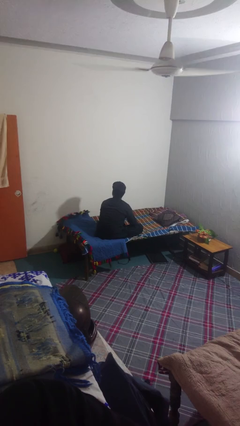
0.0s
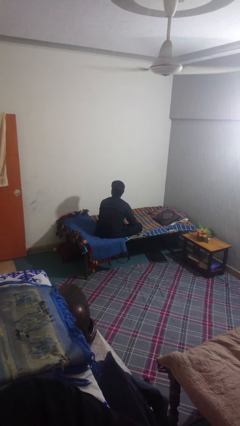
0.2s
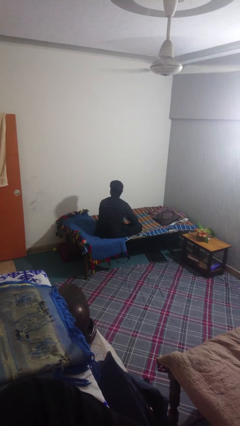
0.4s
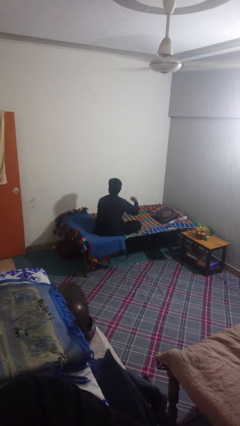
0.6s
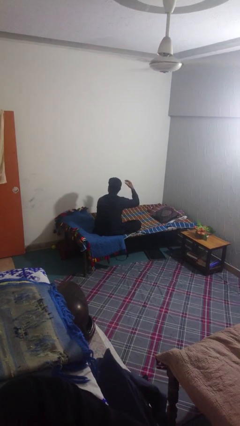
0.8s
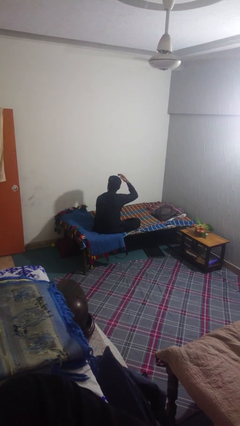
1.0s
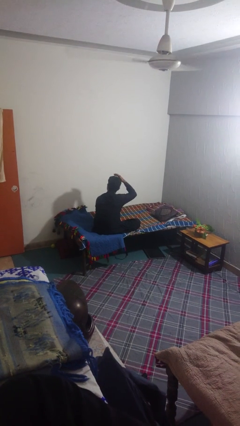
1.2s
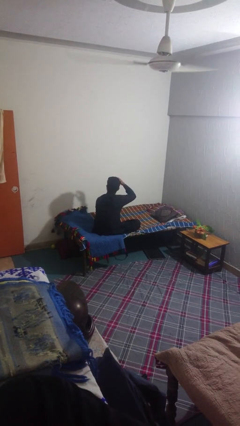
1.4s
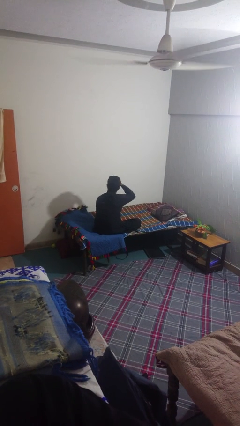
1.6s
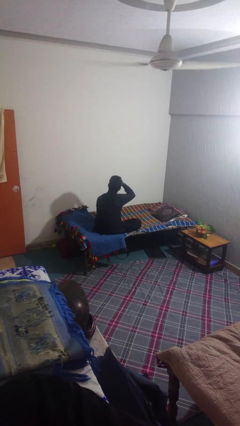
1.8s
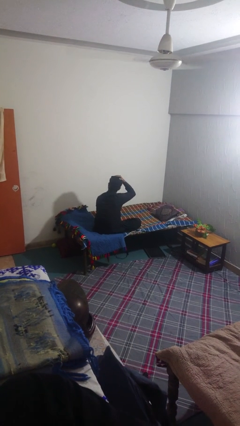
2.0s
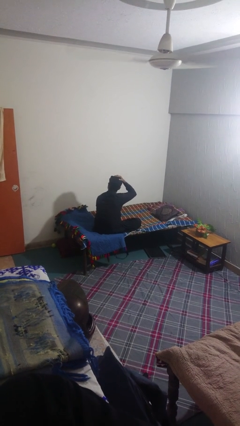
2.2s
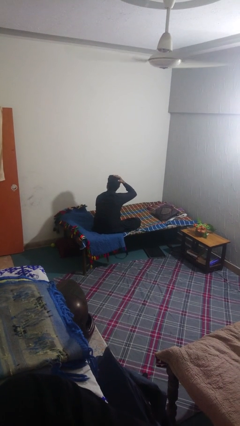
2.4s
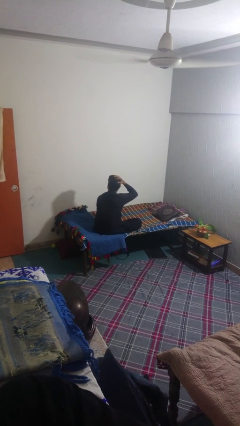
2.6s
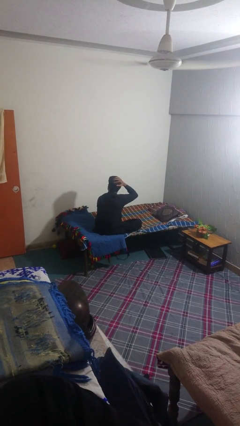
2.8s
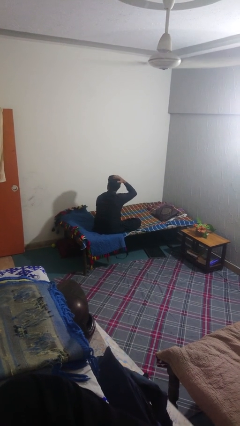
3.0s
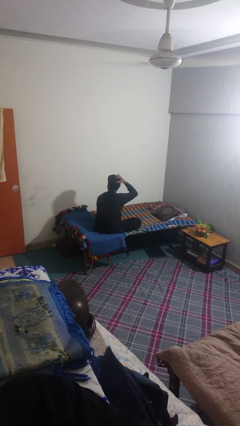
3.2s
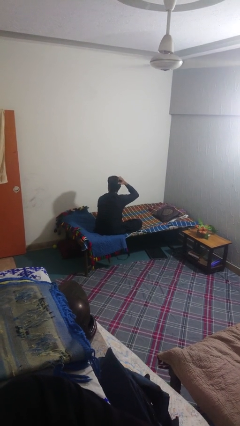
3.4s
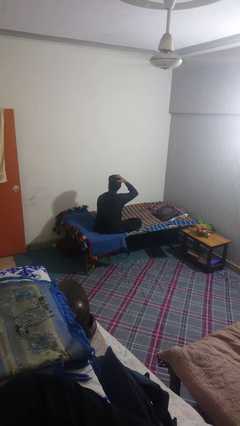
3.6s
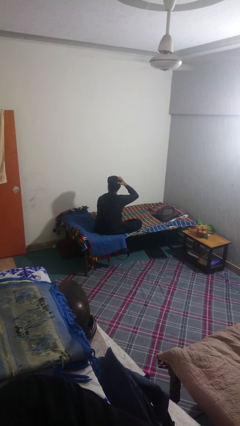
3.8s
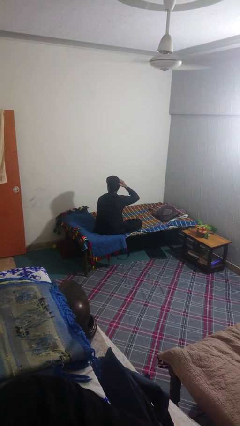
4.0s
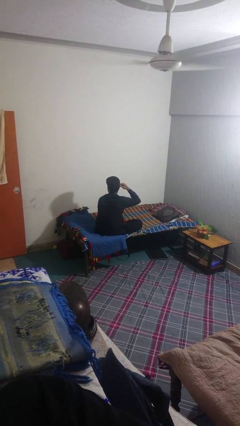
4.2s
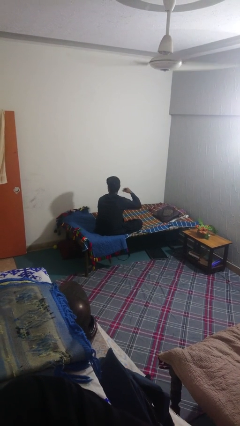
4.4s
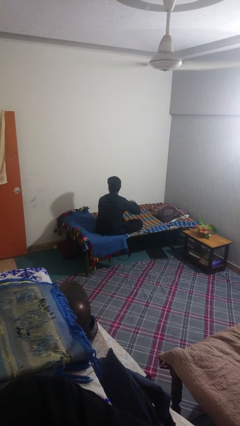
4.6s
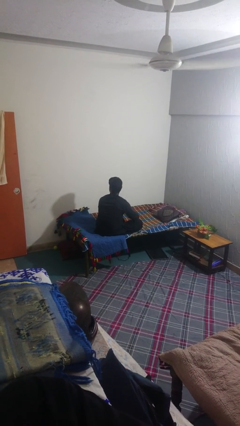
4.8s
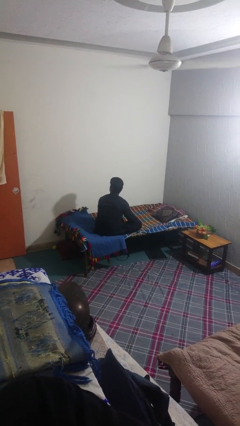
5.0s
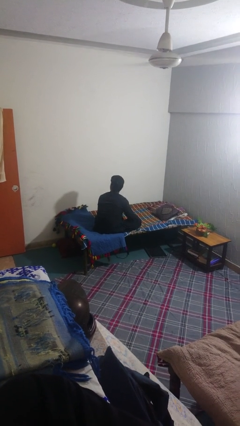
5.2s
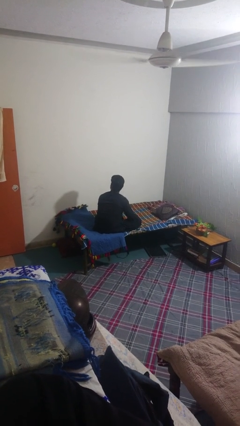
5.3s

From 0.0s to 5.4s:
person strokes hair

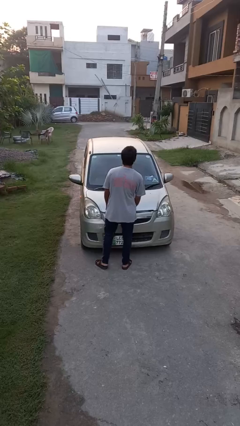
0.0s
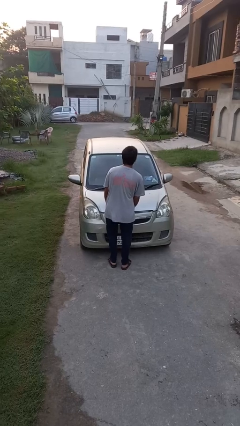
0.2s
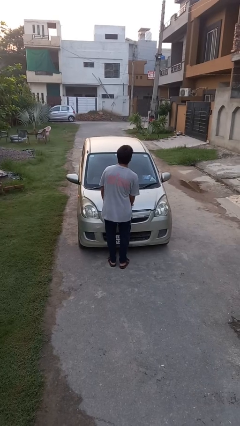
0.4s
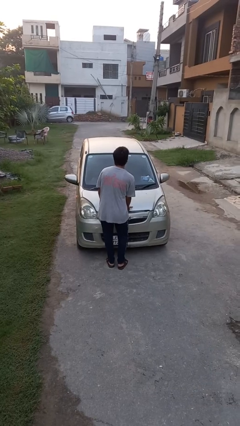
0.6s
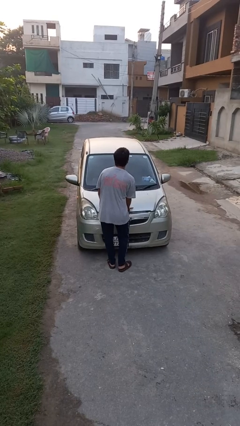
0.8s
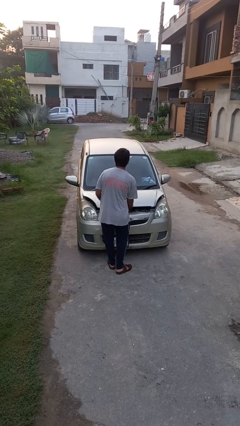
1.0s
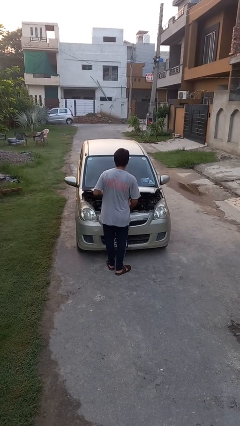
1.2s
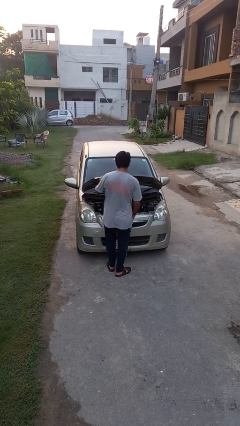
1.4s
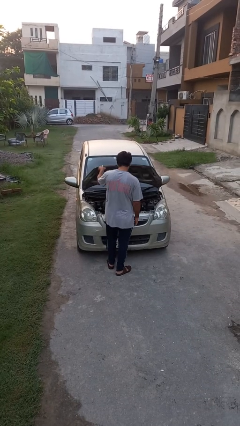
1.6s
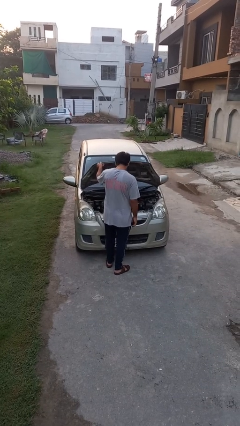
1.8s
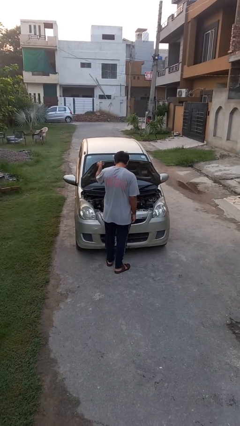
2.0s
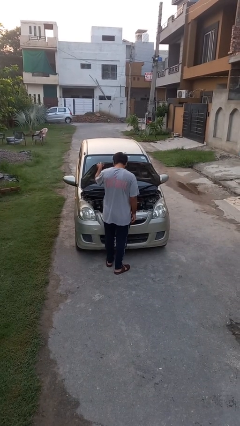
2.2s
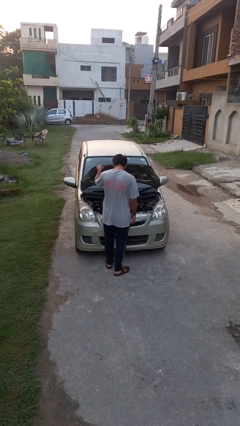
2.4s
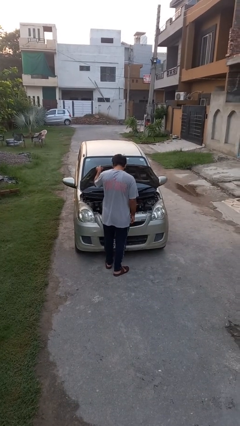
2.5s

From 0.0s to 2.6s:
person opens car hood

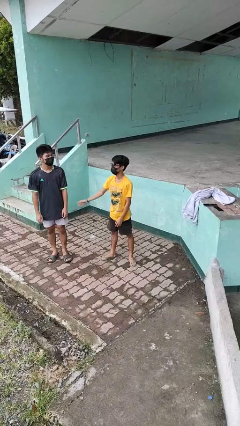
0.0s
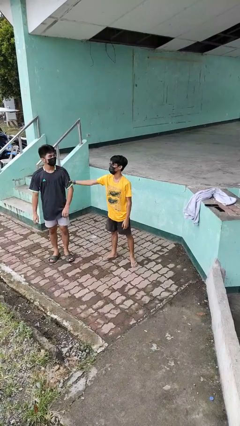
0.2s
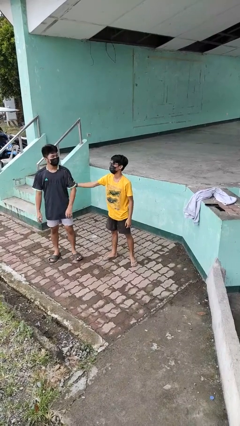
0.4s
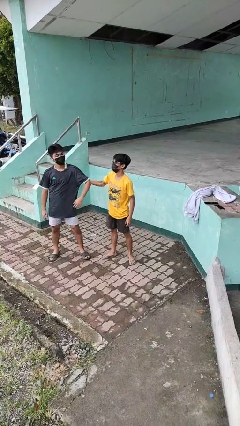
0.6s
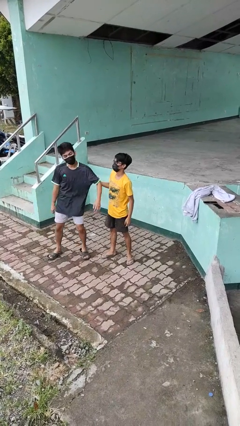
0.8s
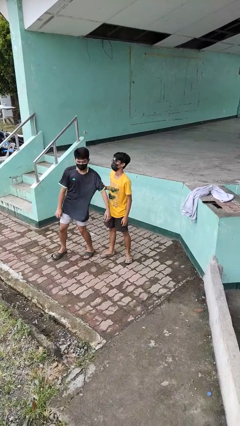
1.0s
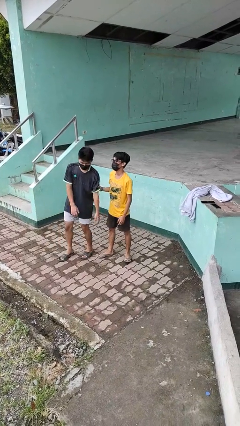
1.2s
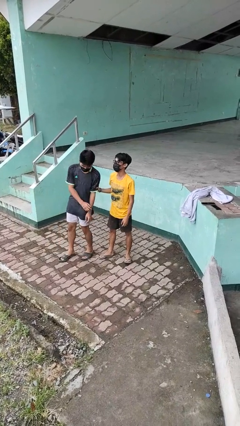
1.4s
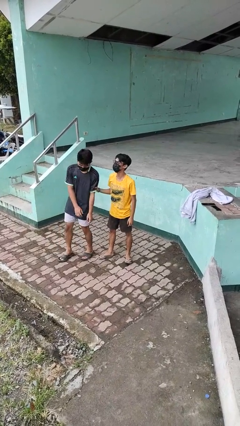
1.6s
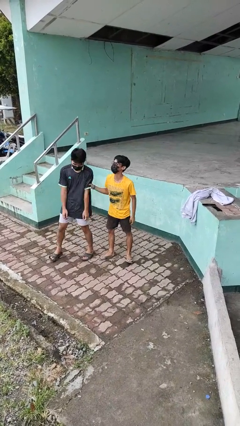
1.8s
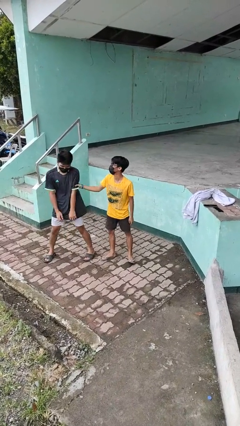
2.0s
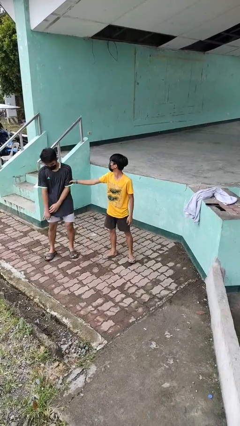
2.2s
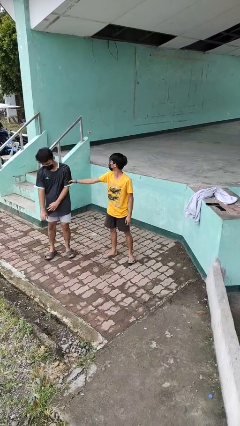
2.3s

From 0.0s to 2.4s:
person grabs person by bicep

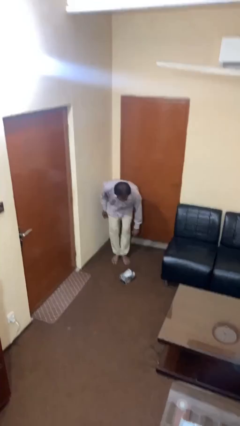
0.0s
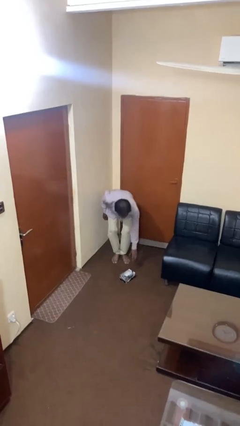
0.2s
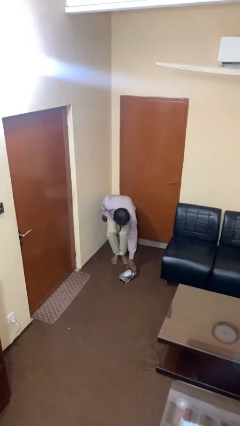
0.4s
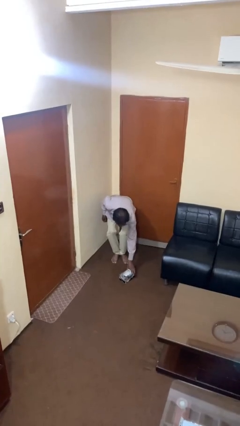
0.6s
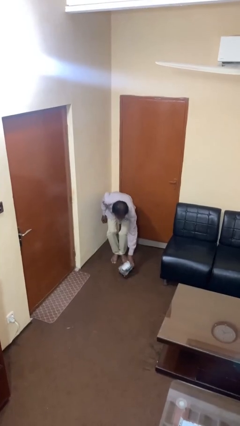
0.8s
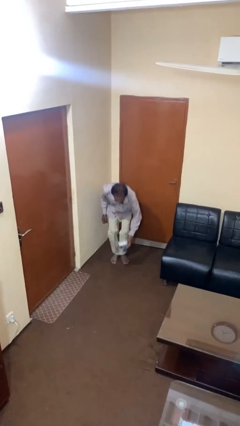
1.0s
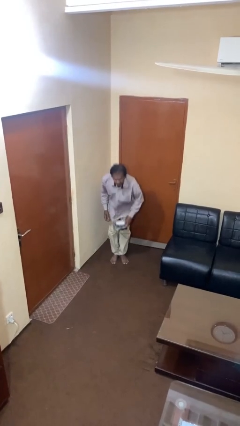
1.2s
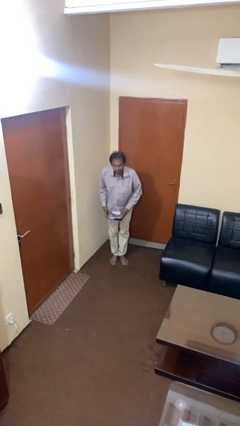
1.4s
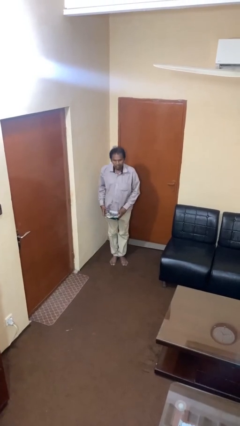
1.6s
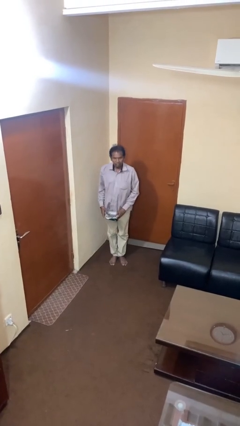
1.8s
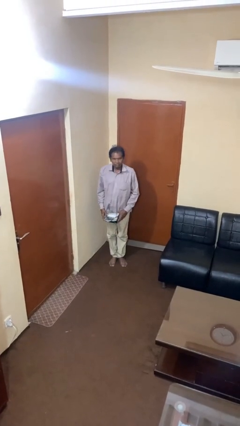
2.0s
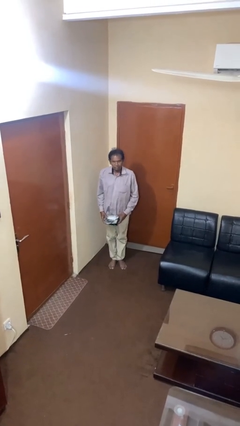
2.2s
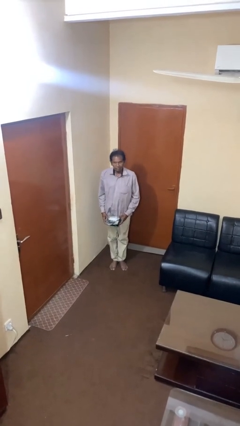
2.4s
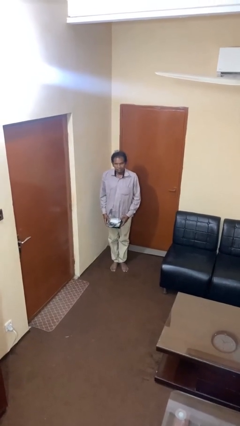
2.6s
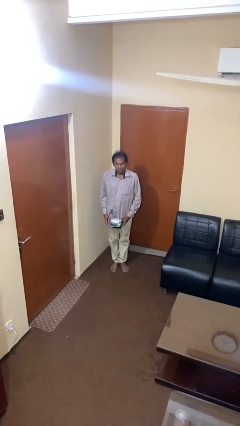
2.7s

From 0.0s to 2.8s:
person picks up object from floor

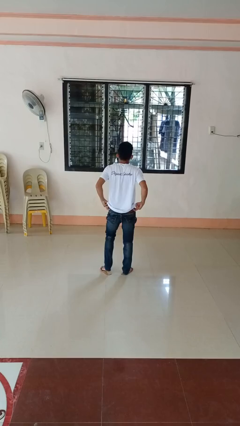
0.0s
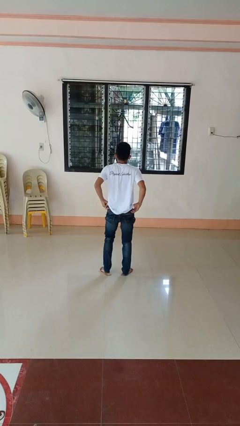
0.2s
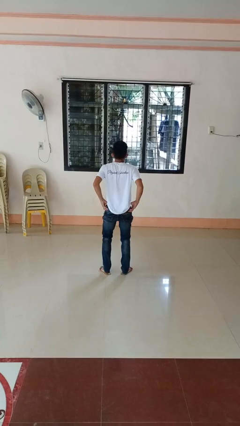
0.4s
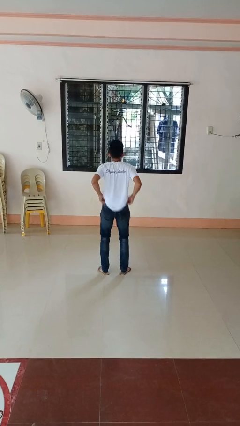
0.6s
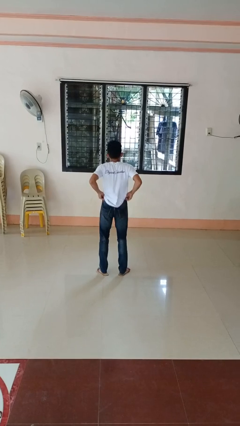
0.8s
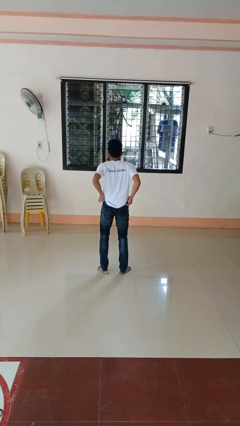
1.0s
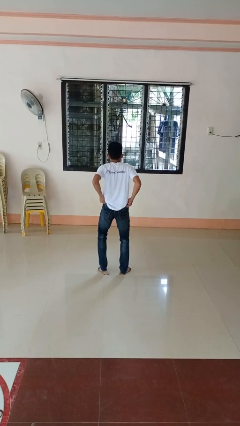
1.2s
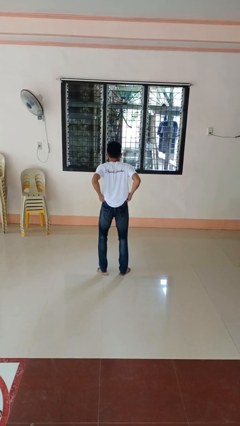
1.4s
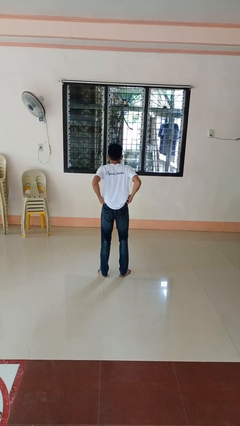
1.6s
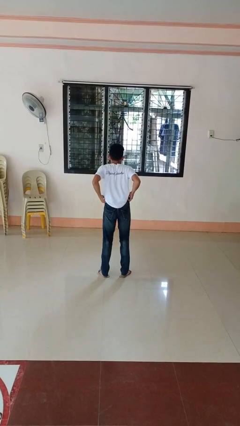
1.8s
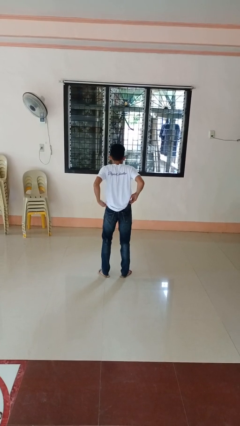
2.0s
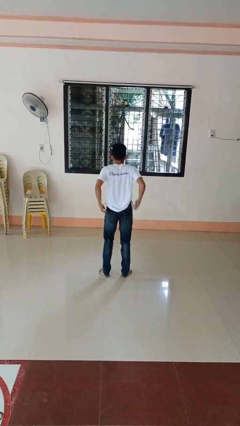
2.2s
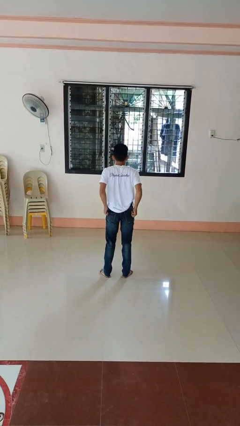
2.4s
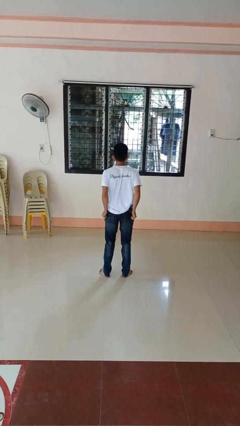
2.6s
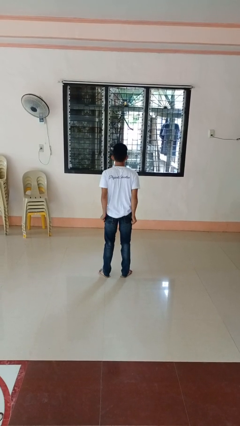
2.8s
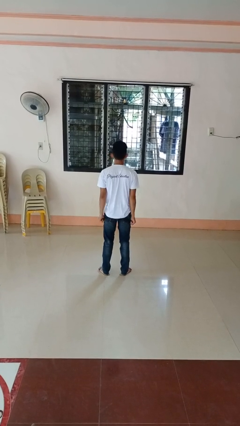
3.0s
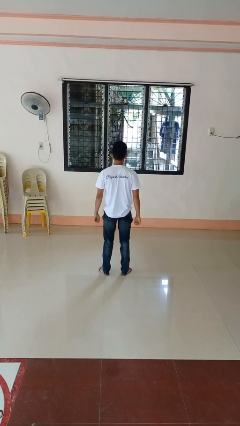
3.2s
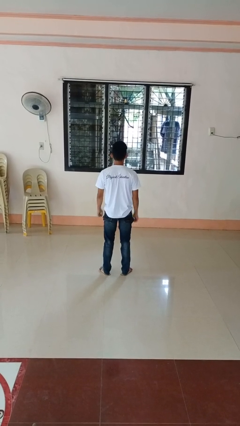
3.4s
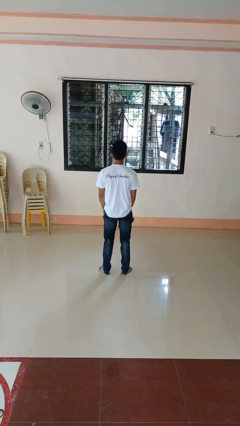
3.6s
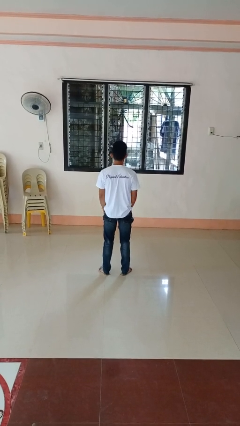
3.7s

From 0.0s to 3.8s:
person hikes up pants
